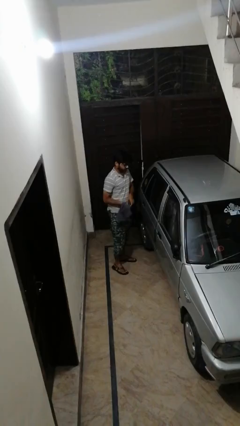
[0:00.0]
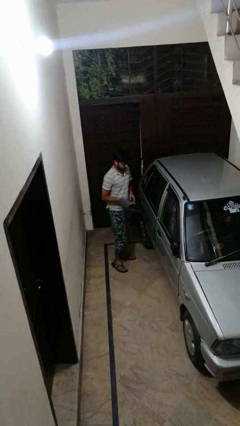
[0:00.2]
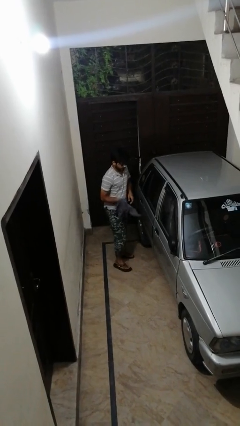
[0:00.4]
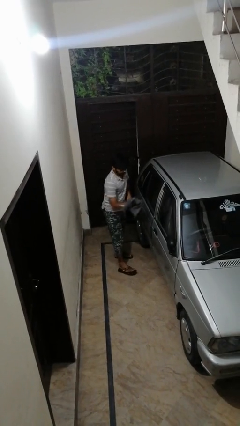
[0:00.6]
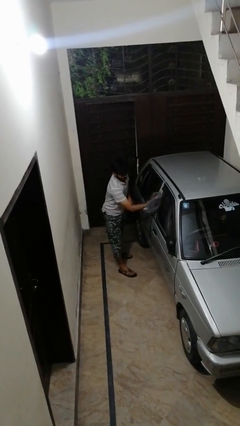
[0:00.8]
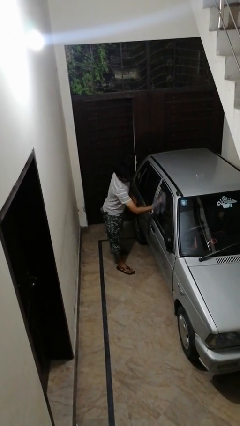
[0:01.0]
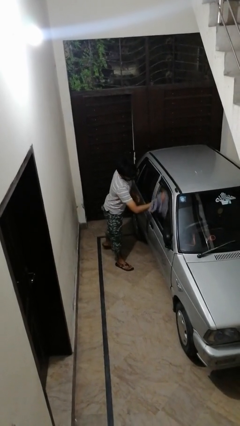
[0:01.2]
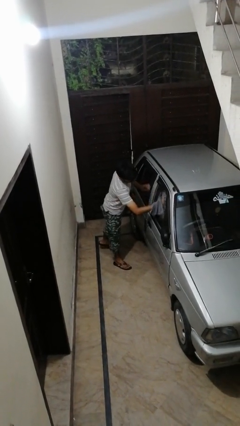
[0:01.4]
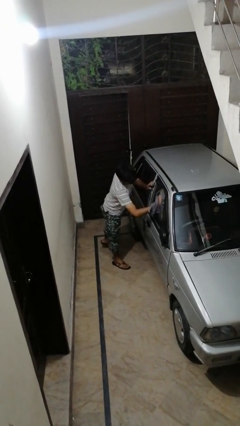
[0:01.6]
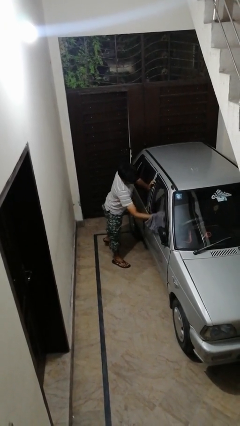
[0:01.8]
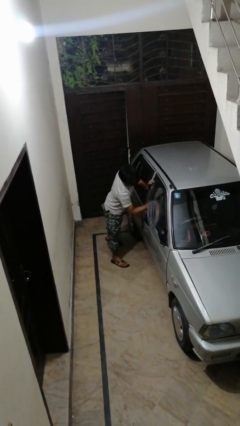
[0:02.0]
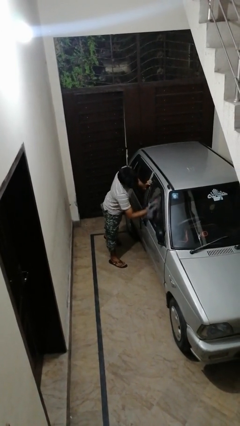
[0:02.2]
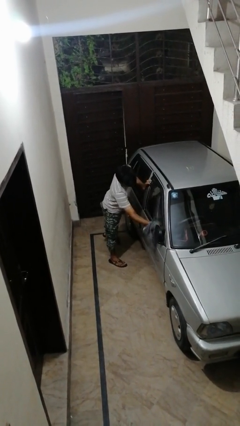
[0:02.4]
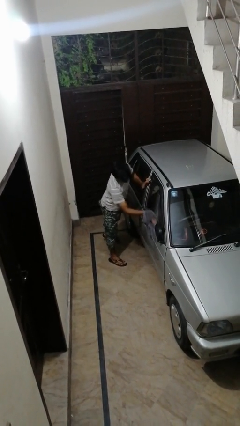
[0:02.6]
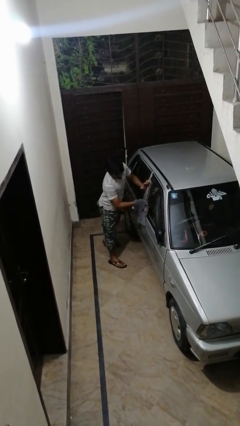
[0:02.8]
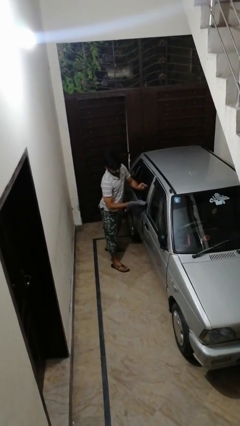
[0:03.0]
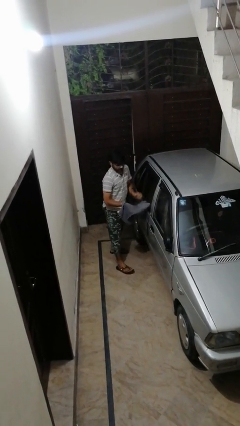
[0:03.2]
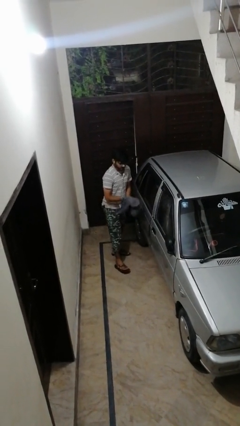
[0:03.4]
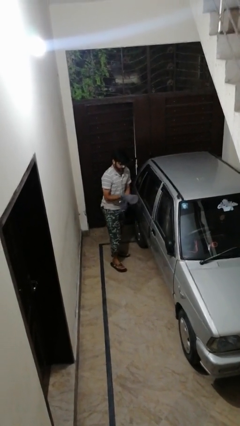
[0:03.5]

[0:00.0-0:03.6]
person polishes car with rag

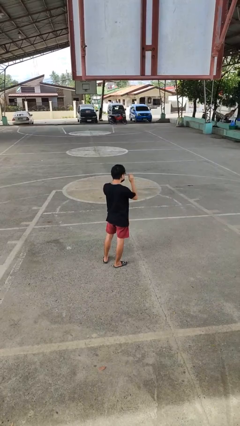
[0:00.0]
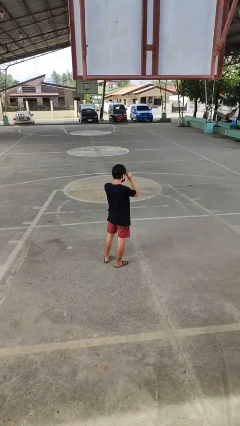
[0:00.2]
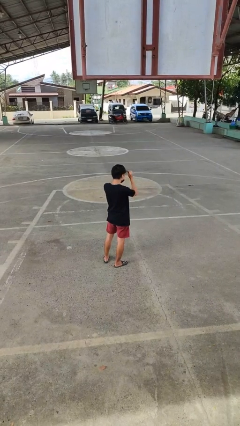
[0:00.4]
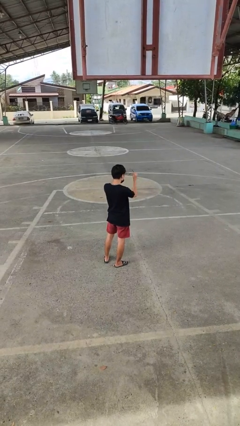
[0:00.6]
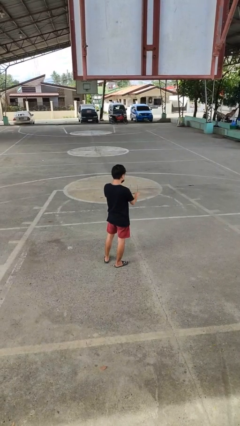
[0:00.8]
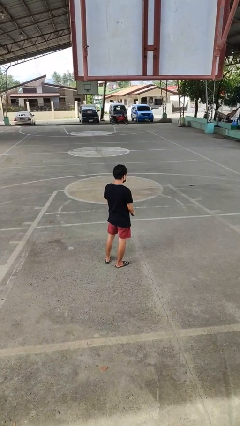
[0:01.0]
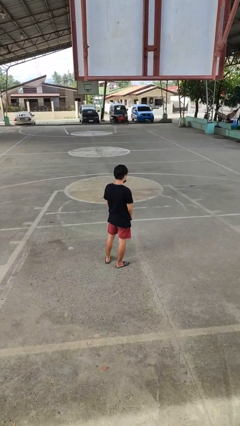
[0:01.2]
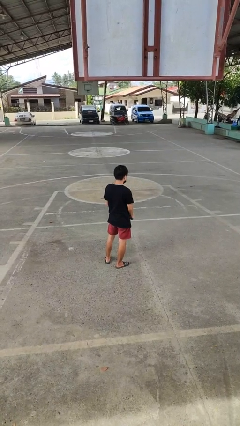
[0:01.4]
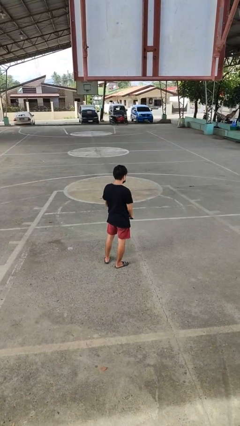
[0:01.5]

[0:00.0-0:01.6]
person takes off glasses

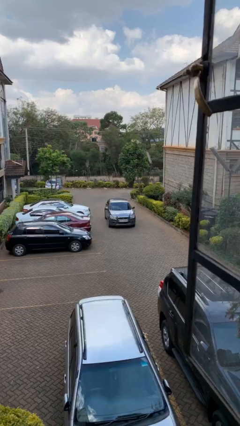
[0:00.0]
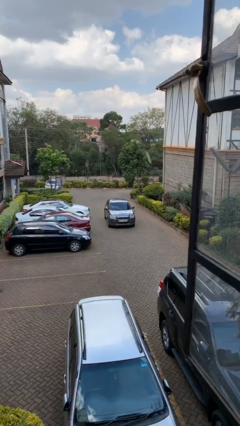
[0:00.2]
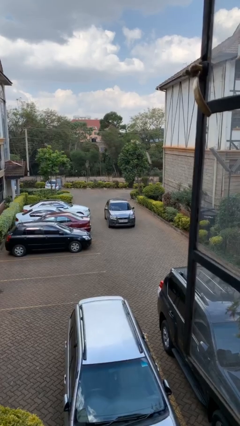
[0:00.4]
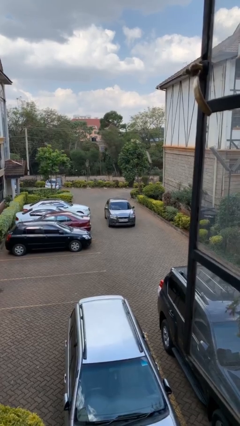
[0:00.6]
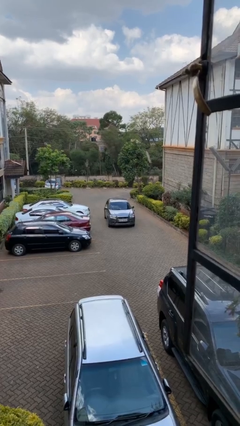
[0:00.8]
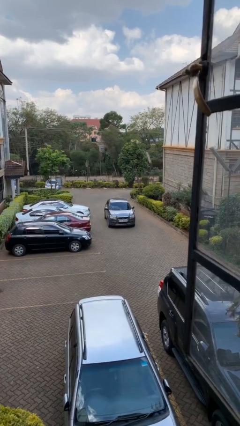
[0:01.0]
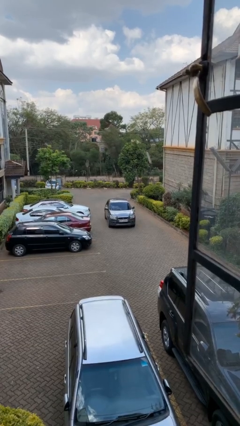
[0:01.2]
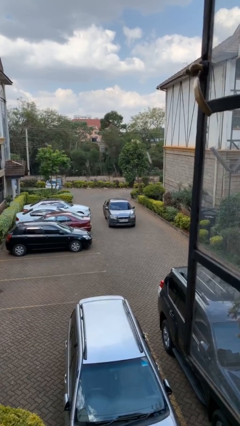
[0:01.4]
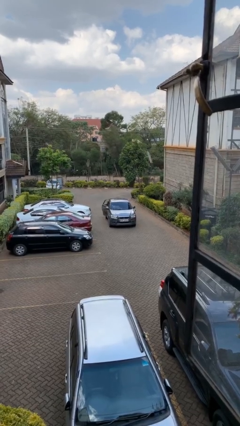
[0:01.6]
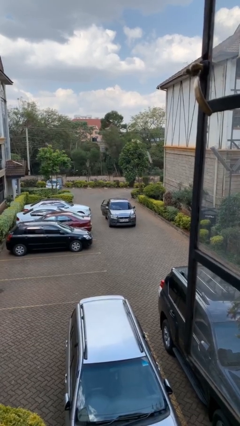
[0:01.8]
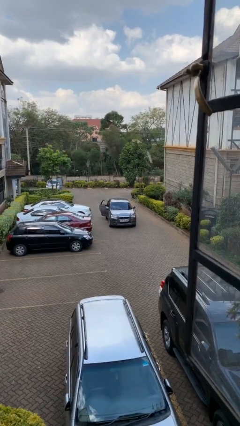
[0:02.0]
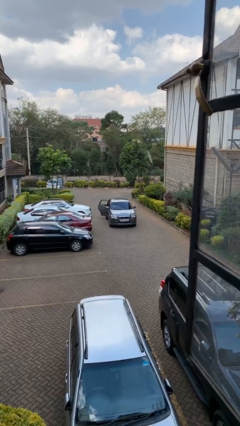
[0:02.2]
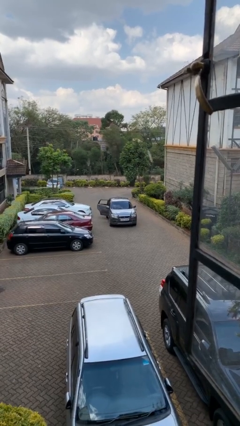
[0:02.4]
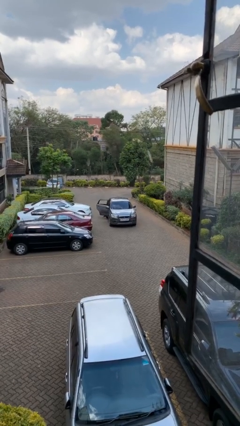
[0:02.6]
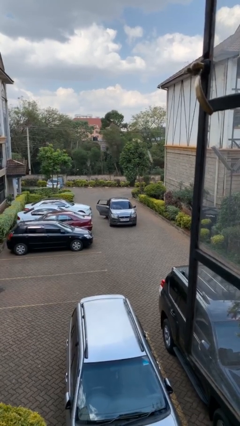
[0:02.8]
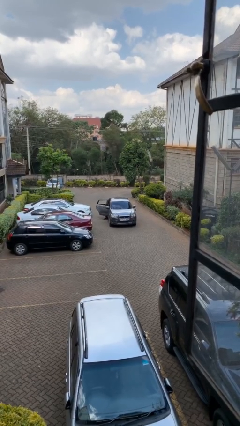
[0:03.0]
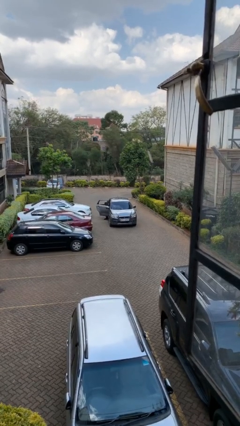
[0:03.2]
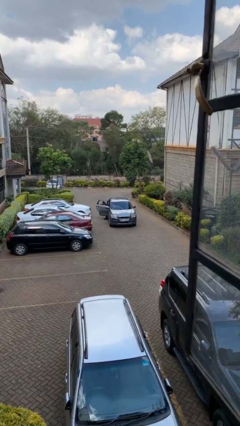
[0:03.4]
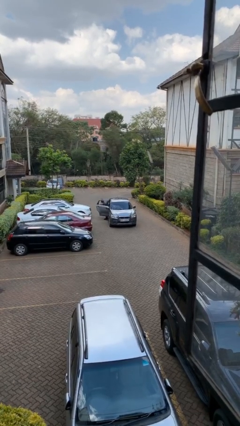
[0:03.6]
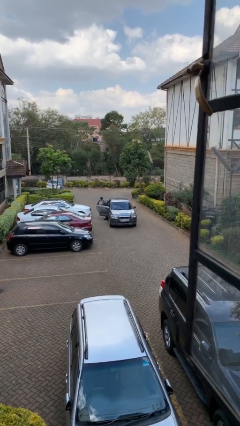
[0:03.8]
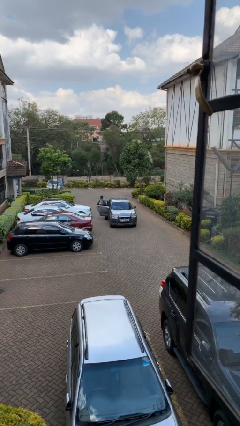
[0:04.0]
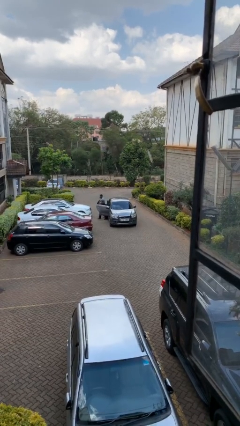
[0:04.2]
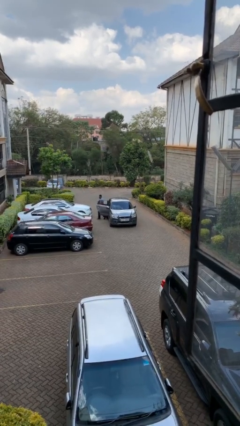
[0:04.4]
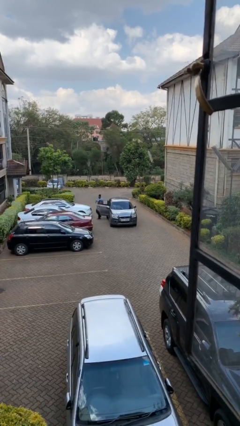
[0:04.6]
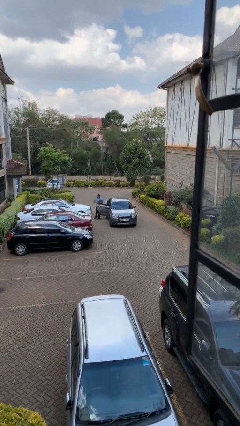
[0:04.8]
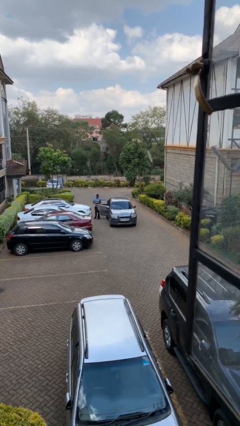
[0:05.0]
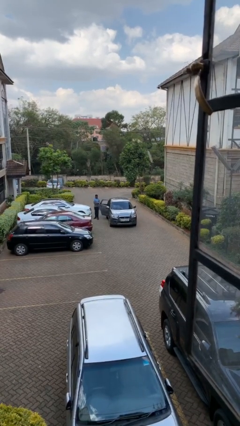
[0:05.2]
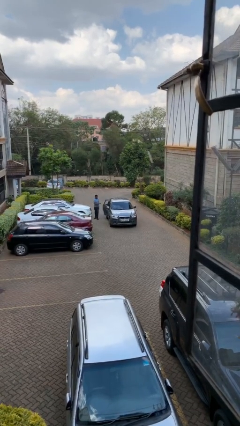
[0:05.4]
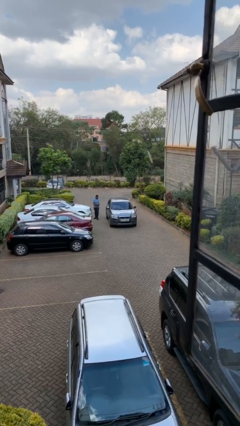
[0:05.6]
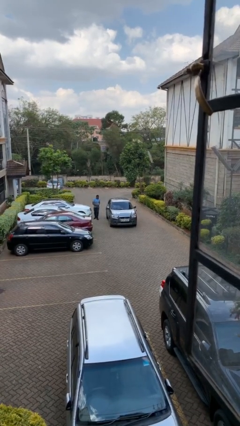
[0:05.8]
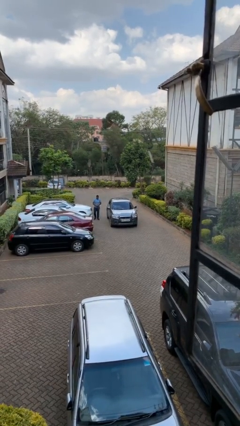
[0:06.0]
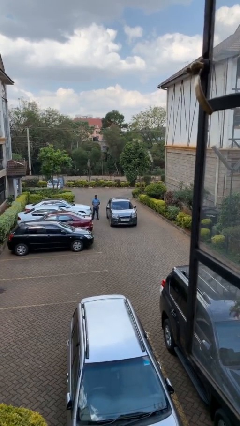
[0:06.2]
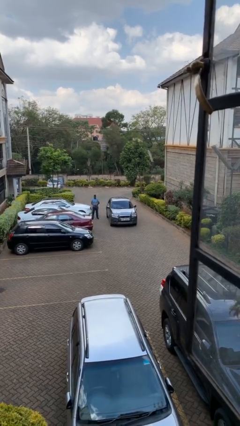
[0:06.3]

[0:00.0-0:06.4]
car drops off person

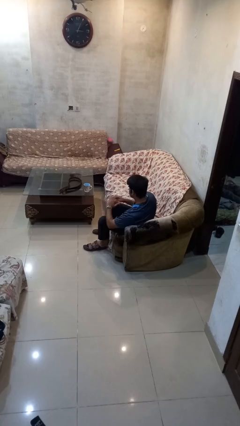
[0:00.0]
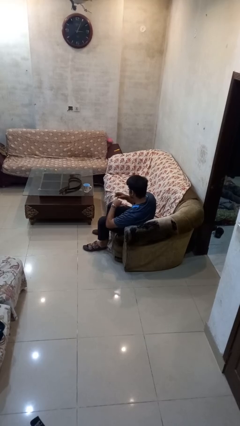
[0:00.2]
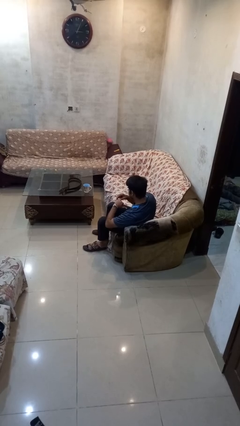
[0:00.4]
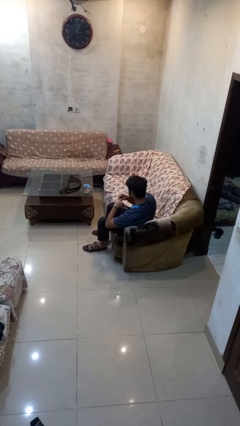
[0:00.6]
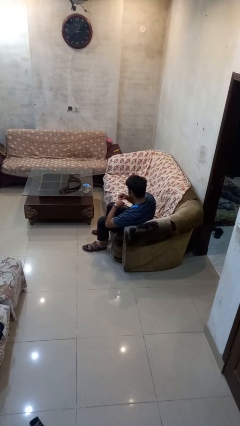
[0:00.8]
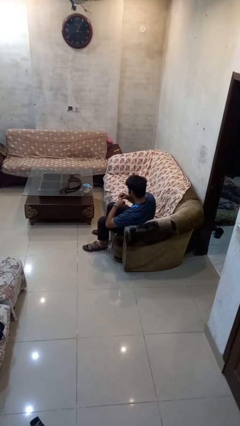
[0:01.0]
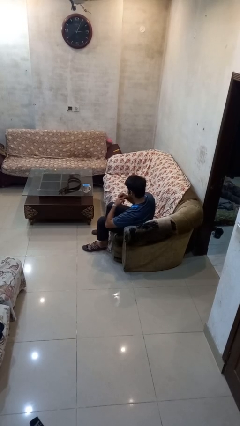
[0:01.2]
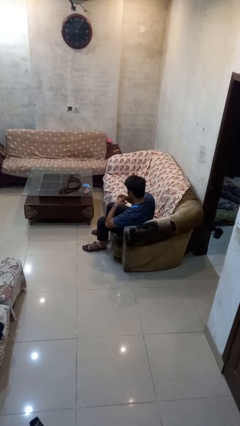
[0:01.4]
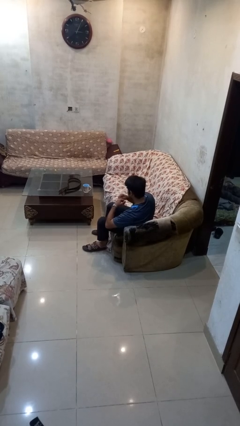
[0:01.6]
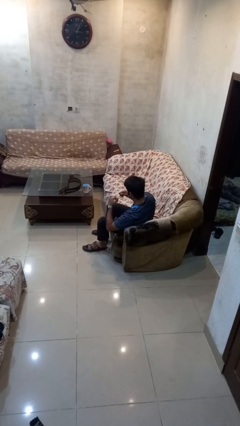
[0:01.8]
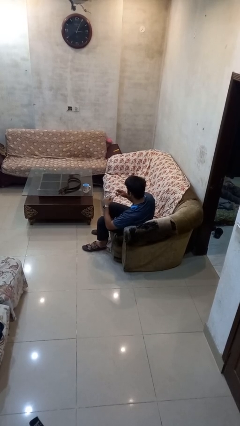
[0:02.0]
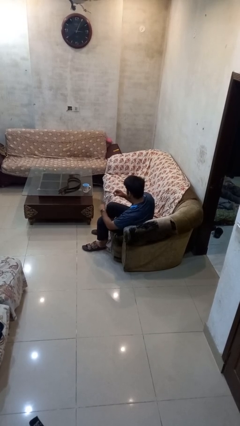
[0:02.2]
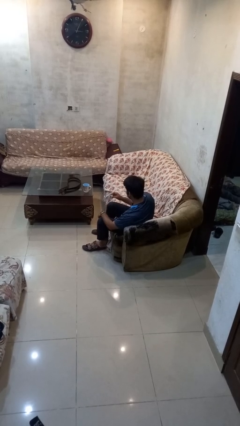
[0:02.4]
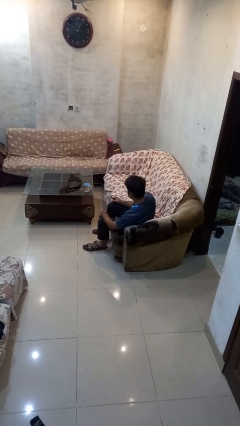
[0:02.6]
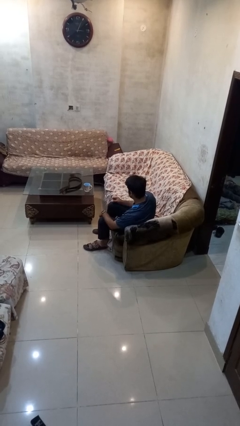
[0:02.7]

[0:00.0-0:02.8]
person takes off ring

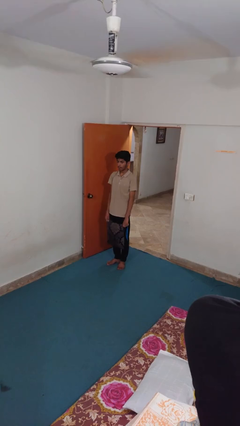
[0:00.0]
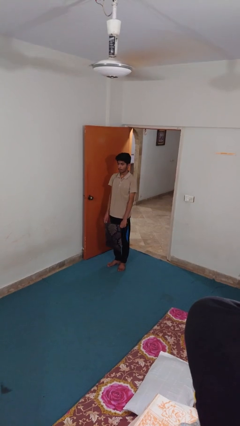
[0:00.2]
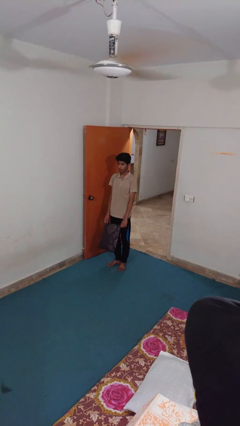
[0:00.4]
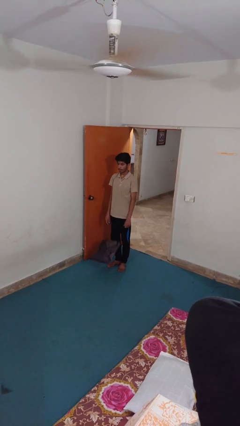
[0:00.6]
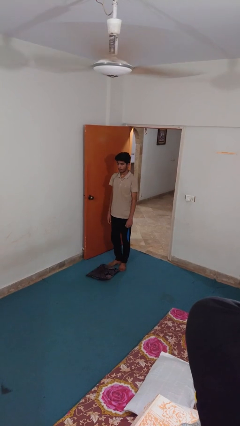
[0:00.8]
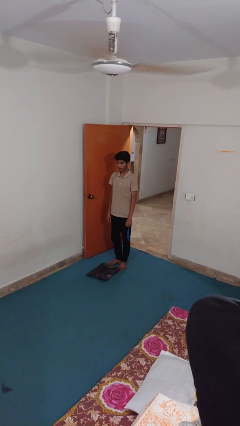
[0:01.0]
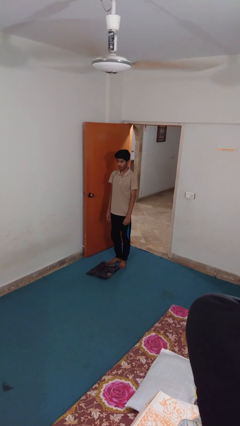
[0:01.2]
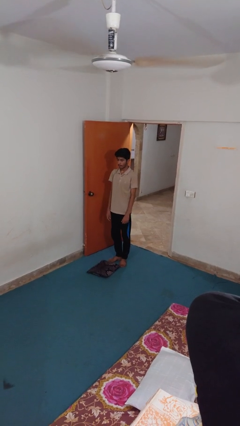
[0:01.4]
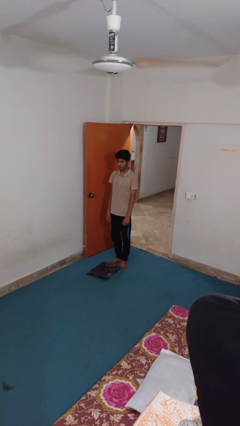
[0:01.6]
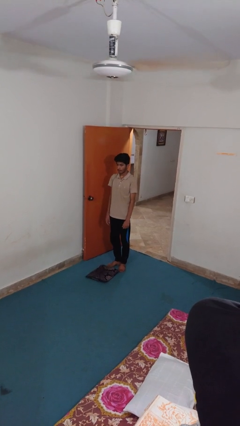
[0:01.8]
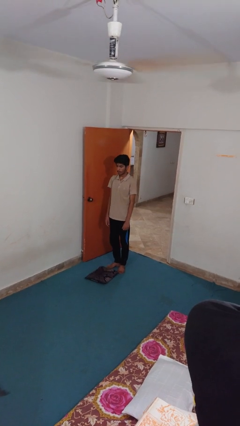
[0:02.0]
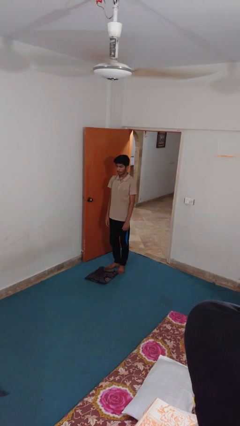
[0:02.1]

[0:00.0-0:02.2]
person drops object

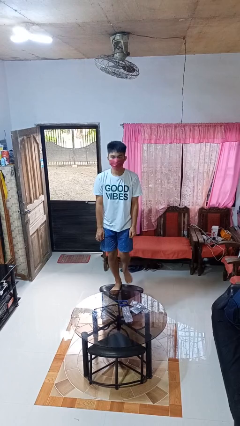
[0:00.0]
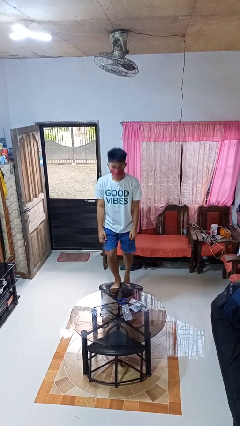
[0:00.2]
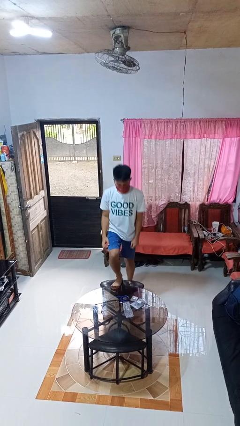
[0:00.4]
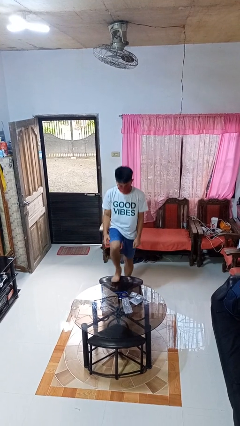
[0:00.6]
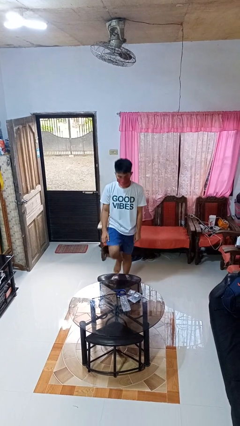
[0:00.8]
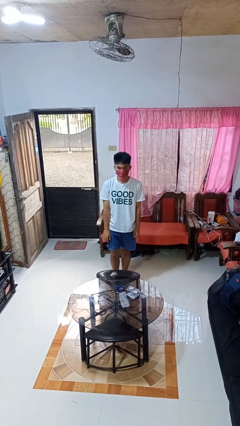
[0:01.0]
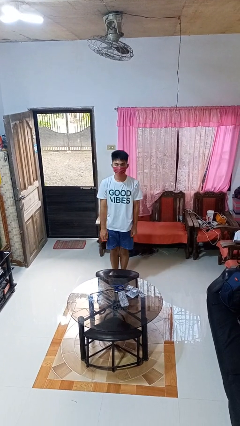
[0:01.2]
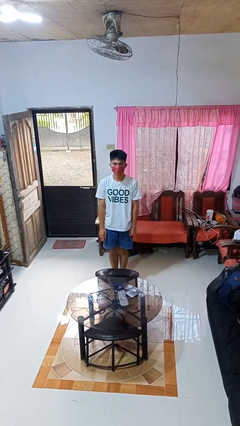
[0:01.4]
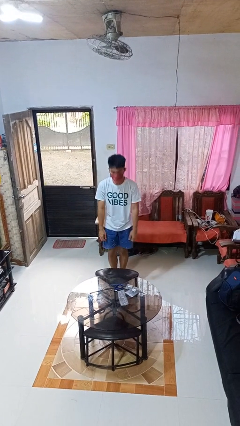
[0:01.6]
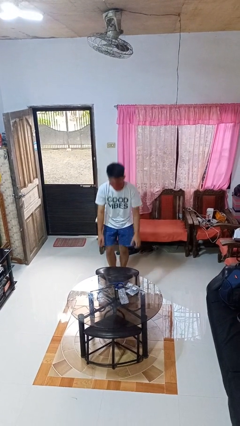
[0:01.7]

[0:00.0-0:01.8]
person climbs off chair
